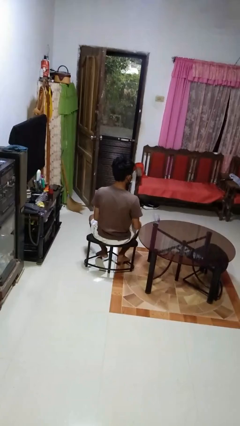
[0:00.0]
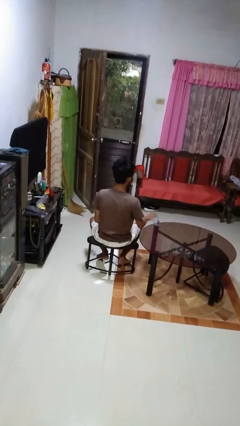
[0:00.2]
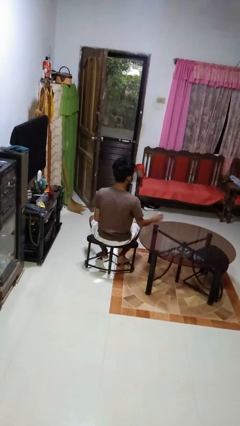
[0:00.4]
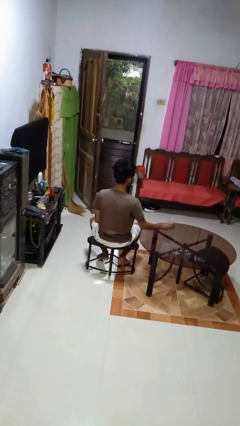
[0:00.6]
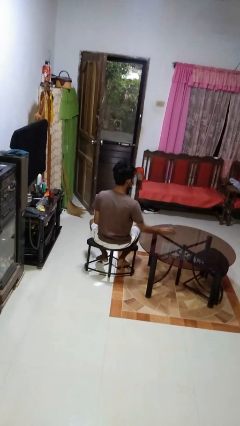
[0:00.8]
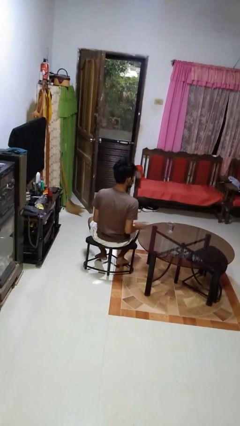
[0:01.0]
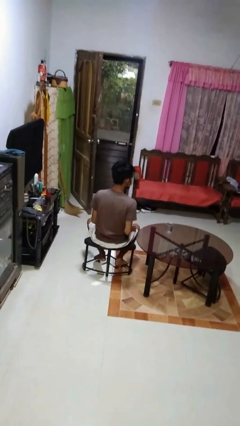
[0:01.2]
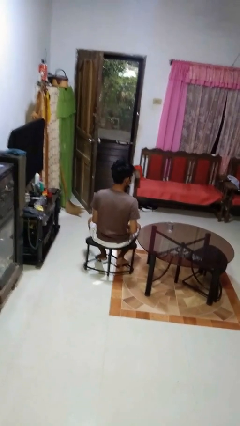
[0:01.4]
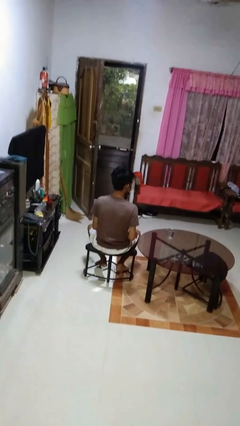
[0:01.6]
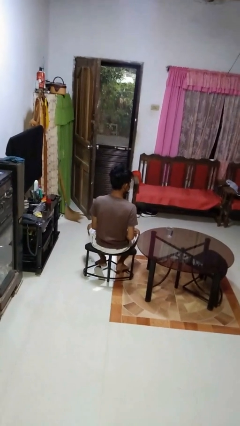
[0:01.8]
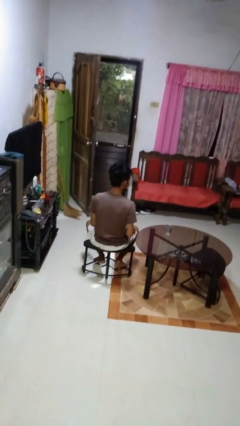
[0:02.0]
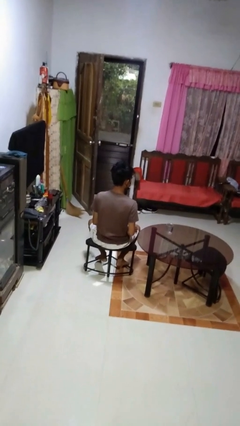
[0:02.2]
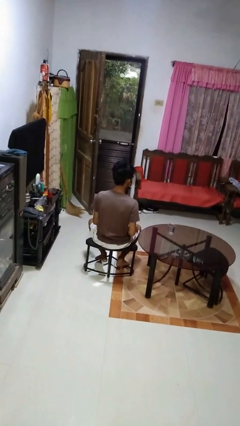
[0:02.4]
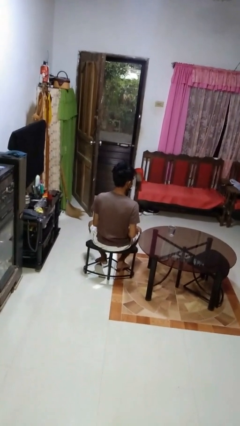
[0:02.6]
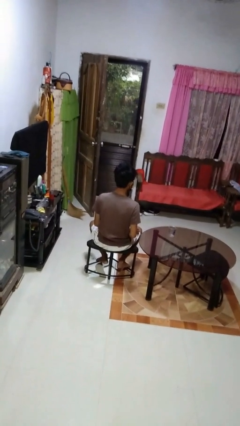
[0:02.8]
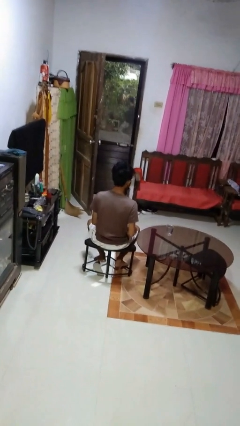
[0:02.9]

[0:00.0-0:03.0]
person sets upright glass

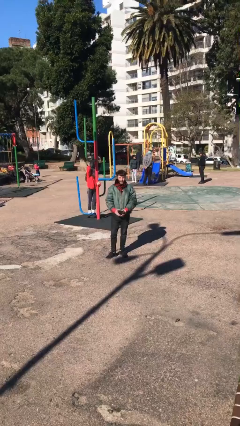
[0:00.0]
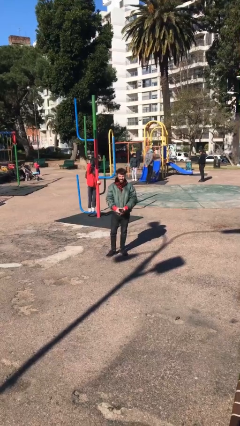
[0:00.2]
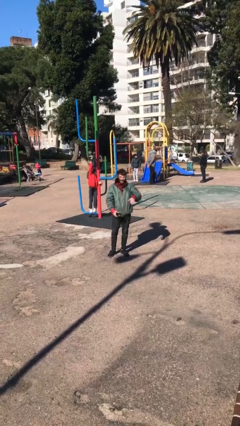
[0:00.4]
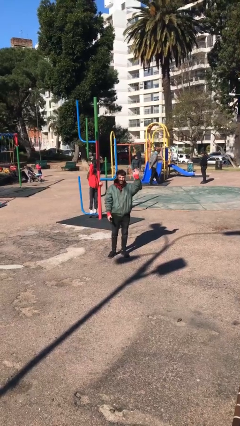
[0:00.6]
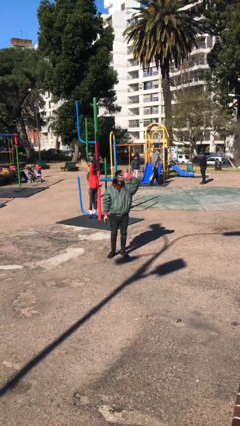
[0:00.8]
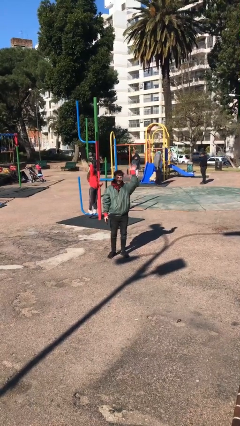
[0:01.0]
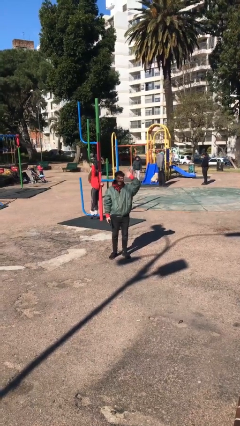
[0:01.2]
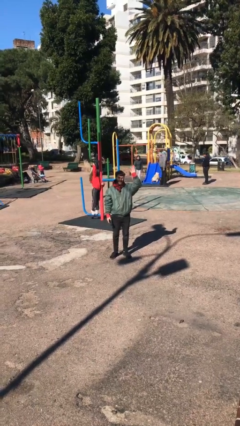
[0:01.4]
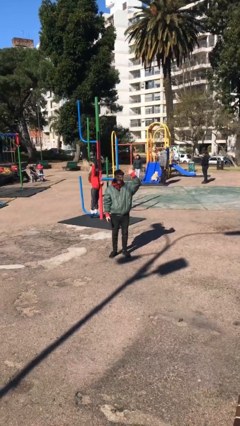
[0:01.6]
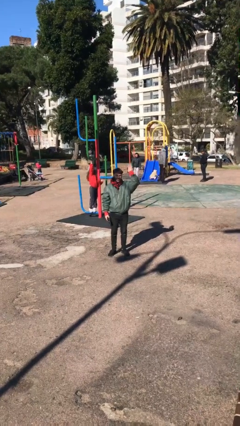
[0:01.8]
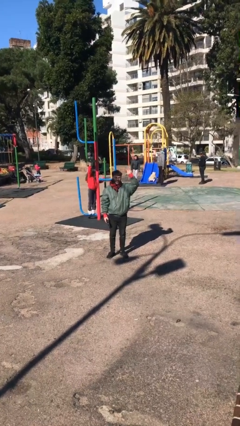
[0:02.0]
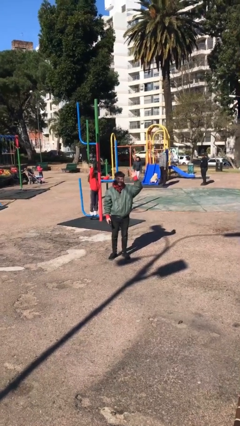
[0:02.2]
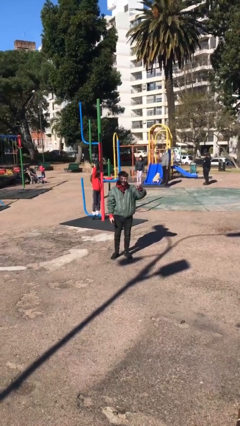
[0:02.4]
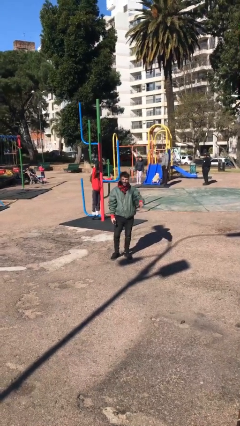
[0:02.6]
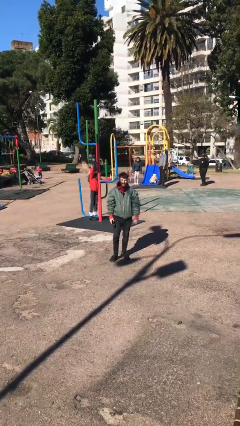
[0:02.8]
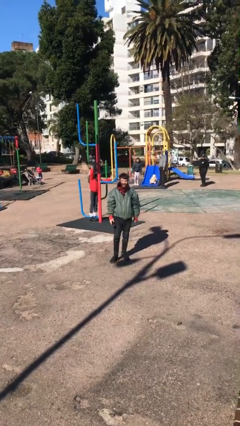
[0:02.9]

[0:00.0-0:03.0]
person waves at person

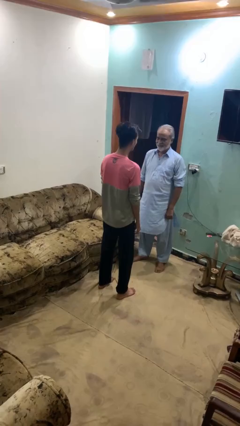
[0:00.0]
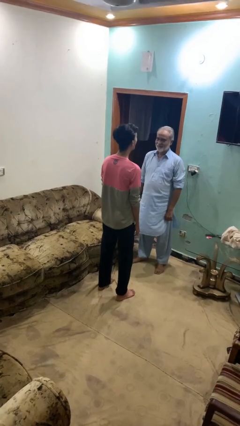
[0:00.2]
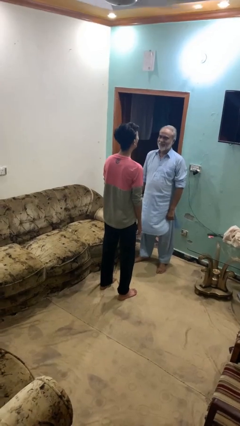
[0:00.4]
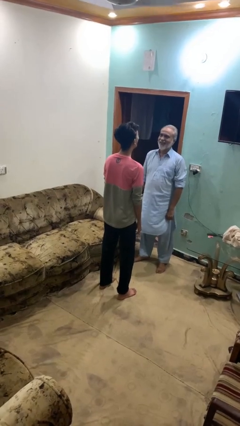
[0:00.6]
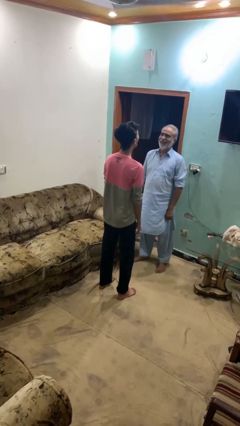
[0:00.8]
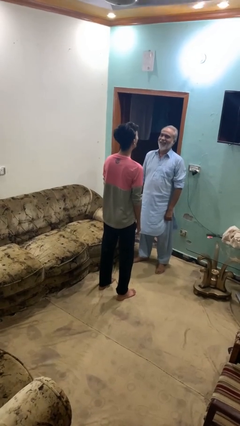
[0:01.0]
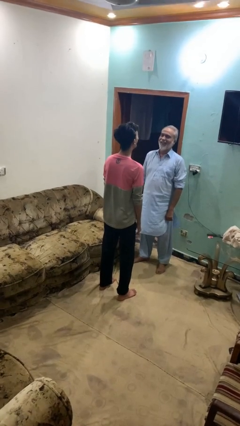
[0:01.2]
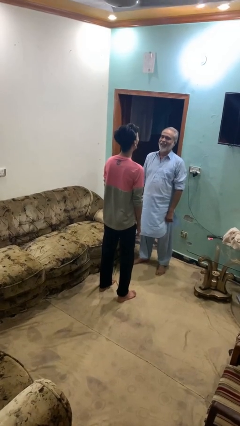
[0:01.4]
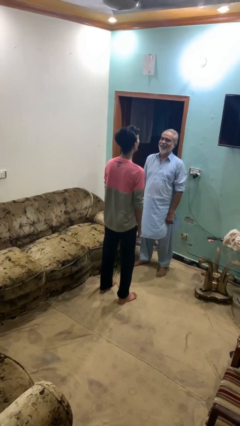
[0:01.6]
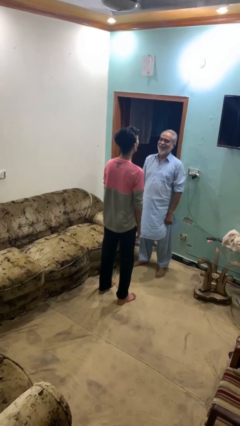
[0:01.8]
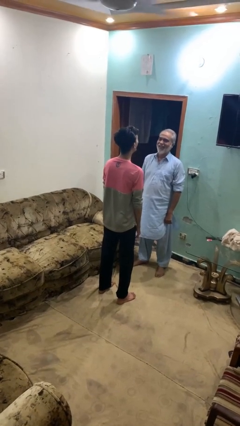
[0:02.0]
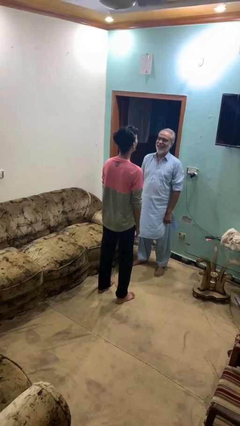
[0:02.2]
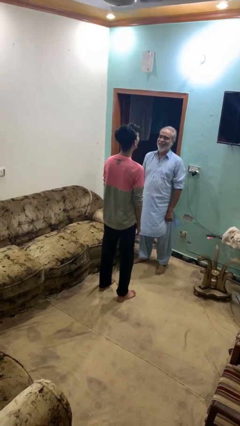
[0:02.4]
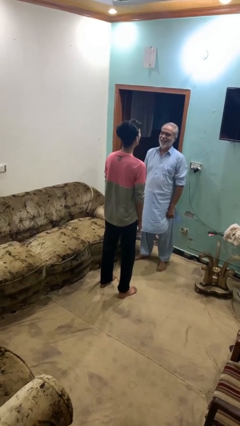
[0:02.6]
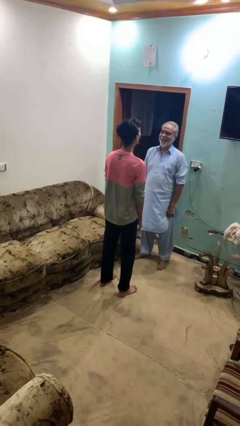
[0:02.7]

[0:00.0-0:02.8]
person laughs with person

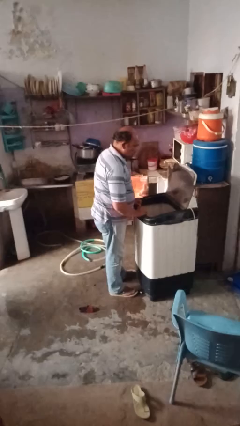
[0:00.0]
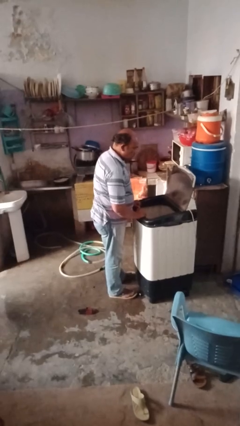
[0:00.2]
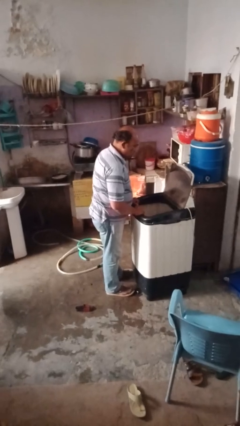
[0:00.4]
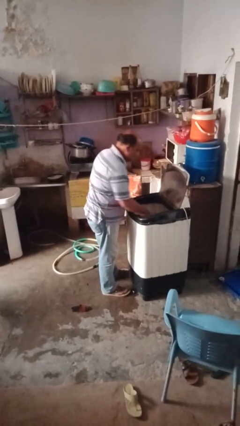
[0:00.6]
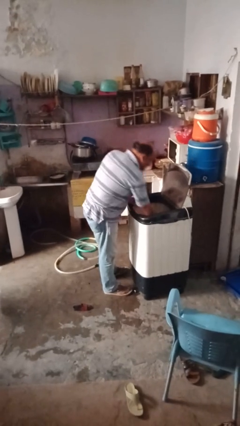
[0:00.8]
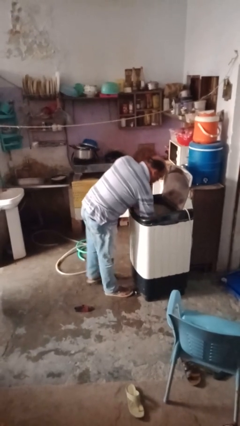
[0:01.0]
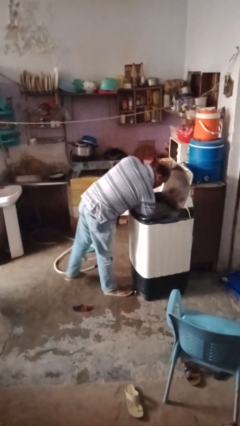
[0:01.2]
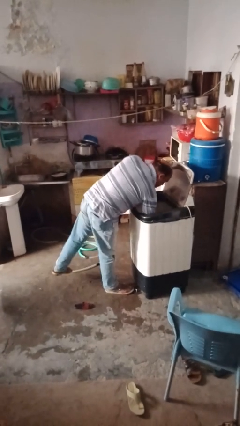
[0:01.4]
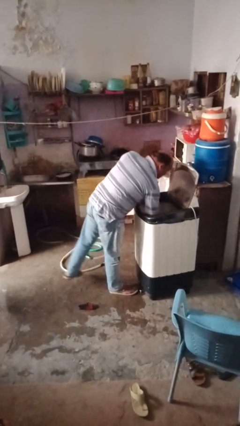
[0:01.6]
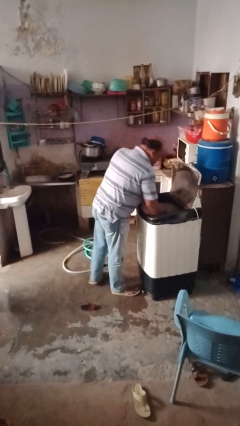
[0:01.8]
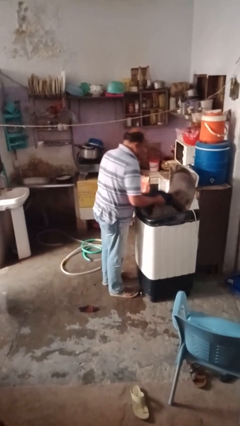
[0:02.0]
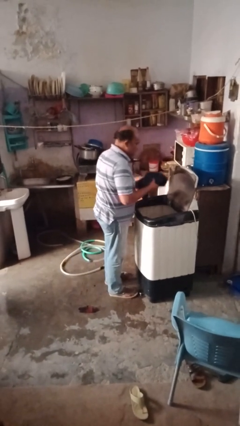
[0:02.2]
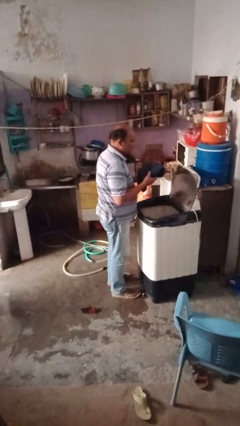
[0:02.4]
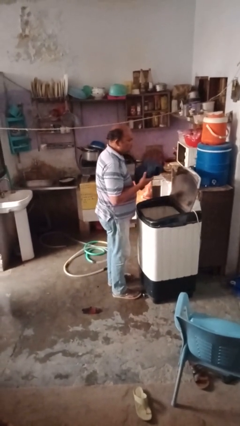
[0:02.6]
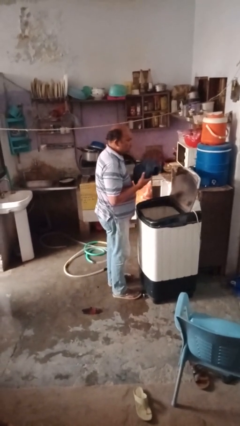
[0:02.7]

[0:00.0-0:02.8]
person unloads clotheswasher

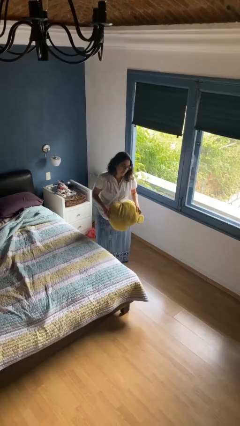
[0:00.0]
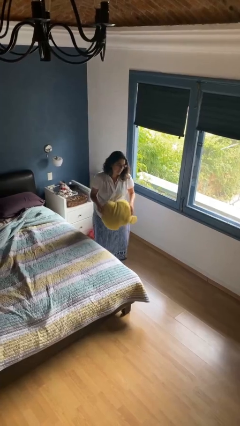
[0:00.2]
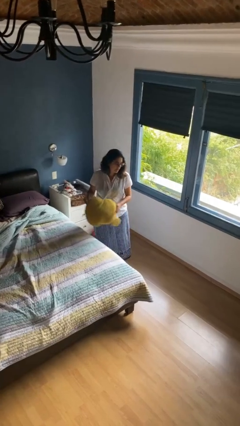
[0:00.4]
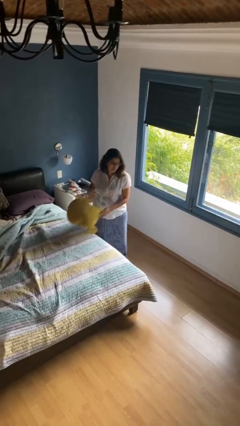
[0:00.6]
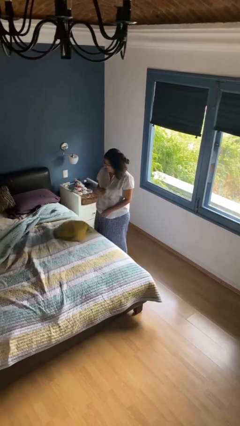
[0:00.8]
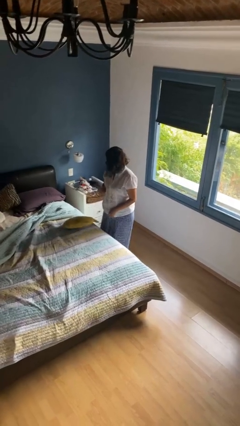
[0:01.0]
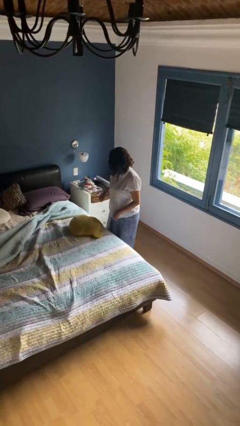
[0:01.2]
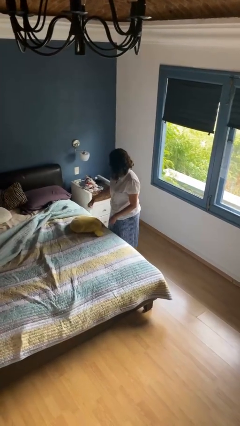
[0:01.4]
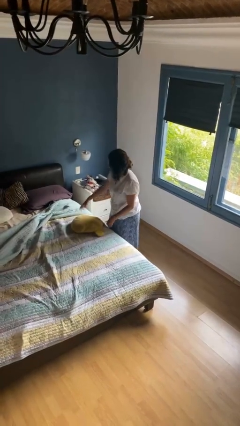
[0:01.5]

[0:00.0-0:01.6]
person throws object on bed

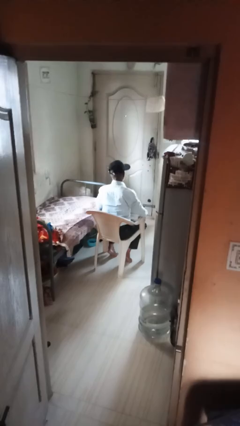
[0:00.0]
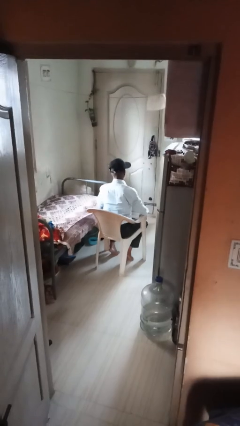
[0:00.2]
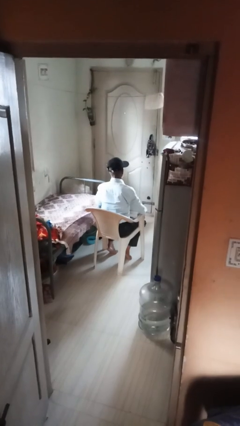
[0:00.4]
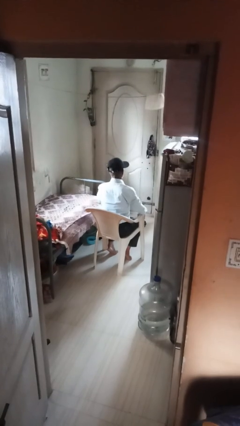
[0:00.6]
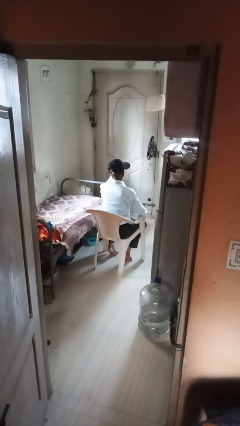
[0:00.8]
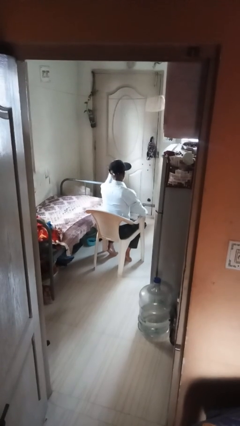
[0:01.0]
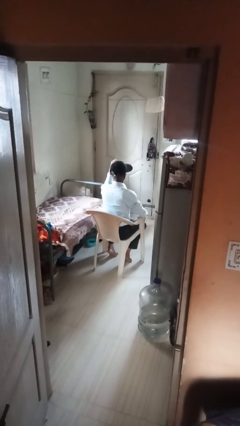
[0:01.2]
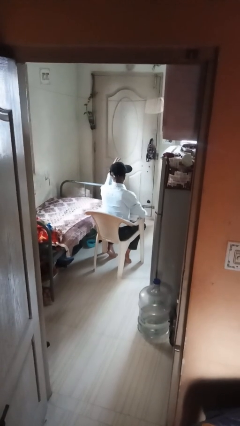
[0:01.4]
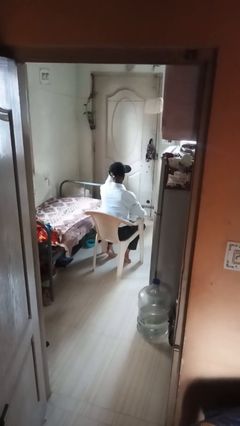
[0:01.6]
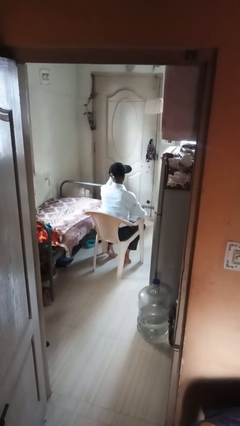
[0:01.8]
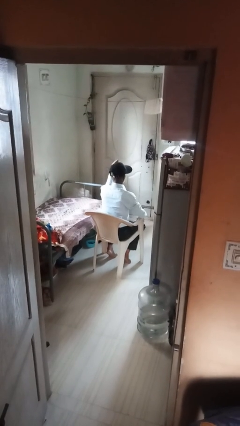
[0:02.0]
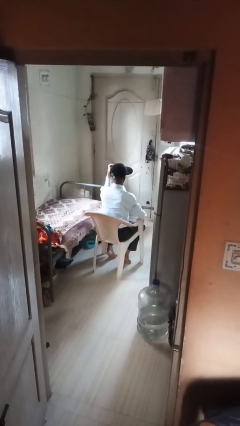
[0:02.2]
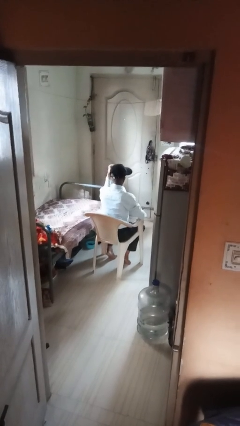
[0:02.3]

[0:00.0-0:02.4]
person snaps fingers

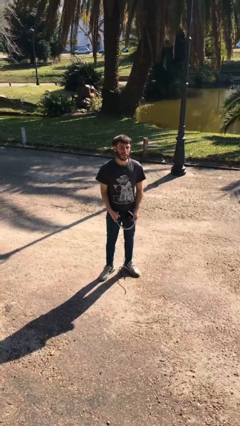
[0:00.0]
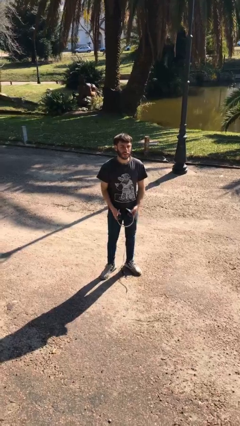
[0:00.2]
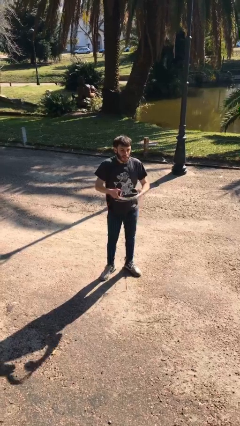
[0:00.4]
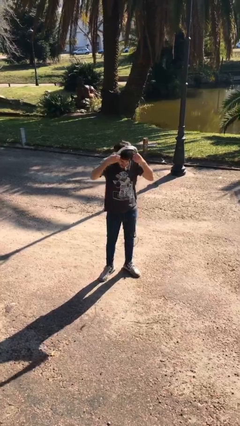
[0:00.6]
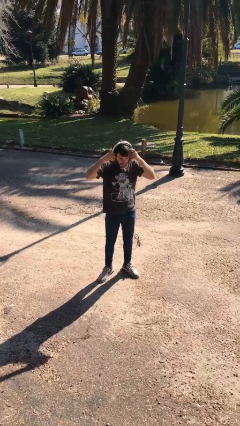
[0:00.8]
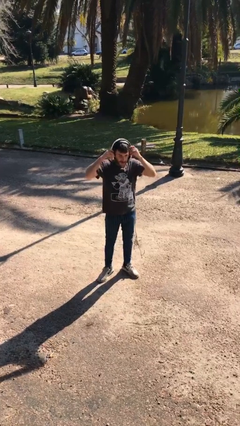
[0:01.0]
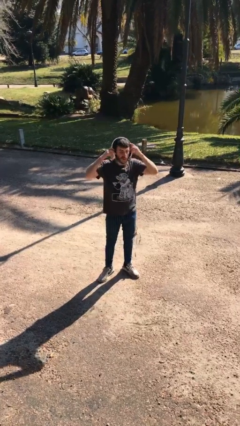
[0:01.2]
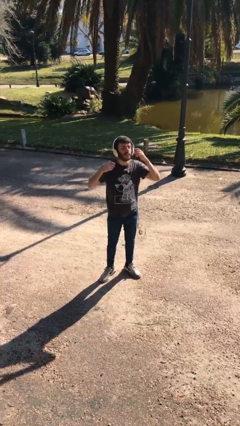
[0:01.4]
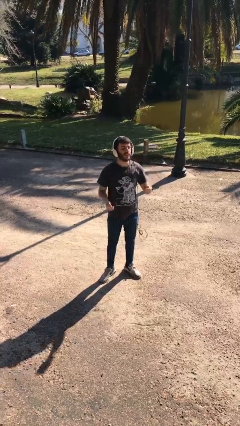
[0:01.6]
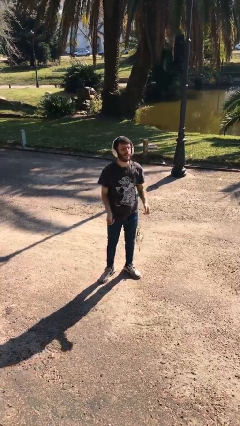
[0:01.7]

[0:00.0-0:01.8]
person puts on headphones
